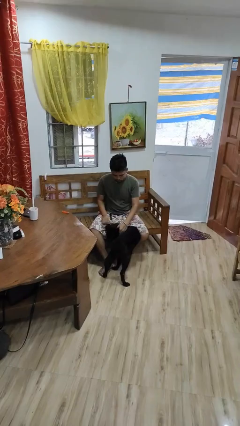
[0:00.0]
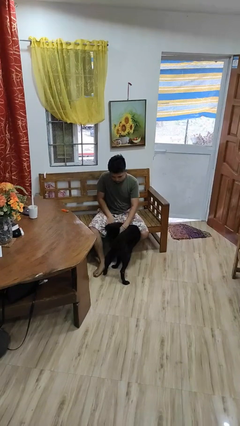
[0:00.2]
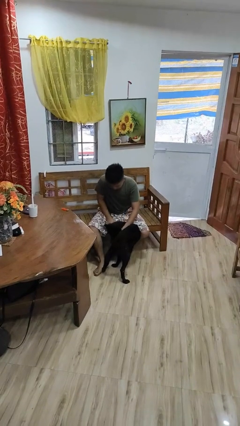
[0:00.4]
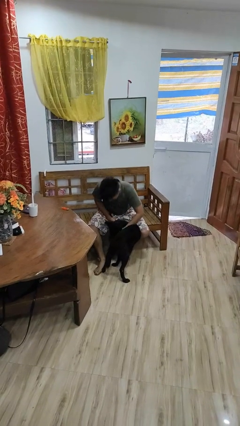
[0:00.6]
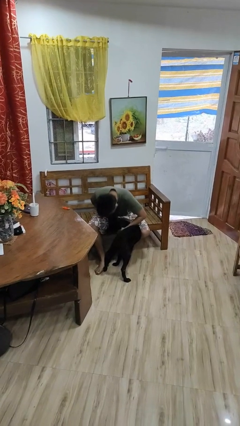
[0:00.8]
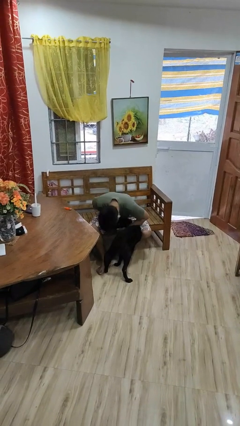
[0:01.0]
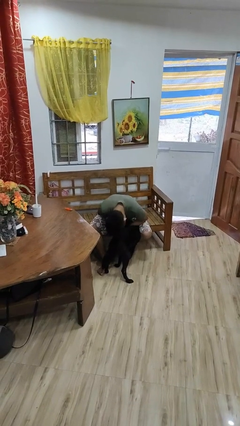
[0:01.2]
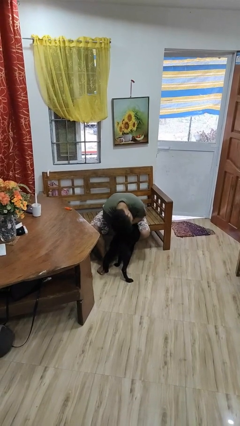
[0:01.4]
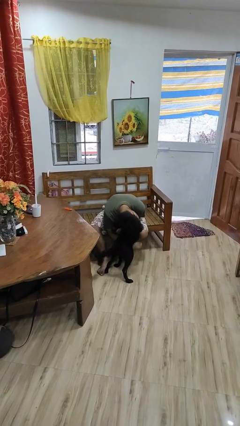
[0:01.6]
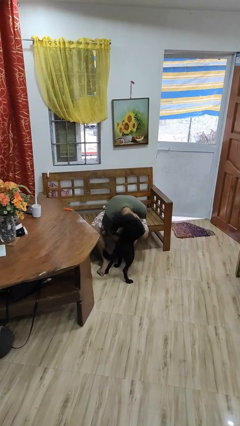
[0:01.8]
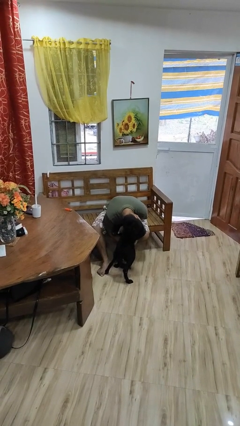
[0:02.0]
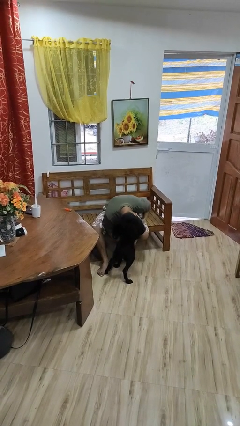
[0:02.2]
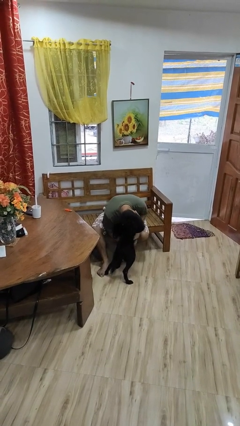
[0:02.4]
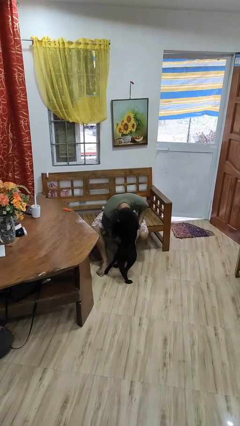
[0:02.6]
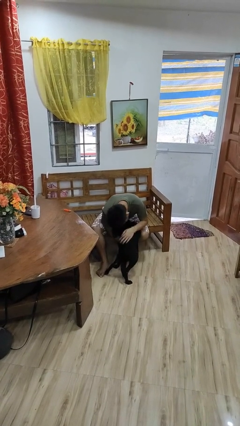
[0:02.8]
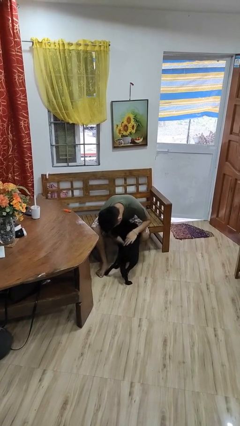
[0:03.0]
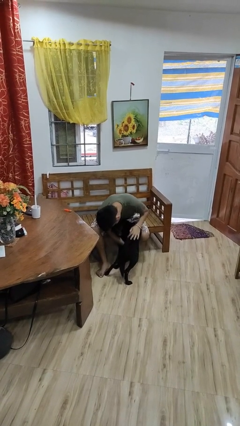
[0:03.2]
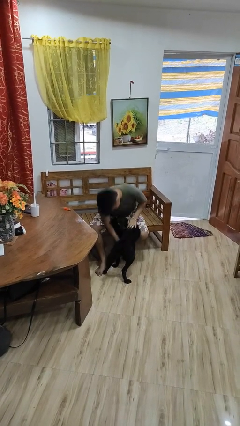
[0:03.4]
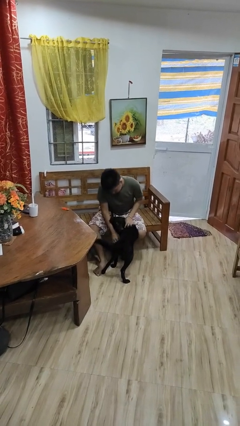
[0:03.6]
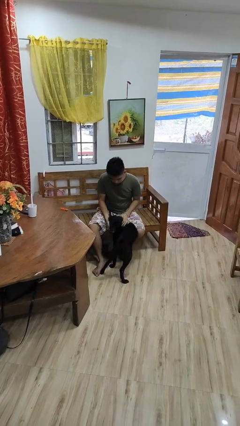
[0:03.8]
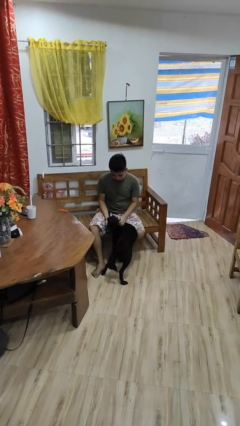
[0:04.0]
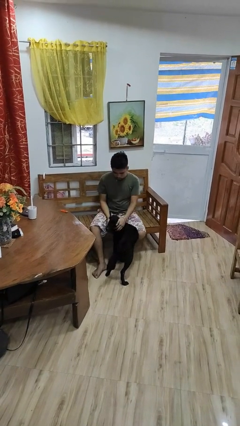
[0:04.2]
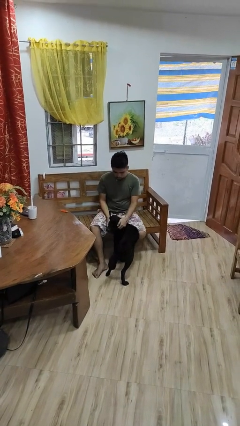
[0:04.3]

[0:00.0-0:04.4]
person hugs dog

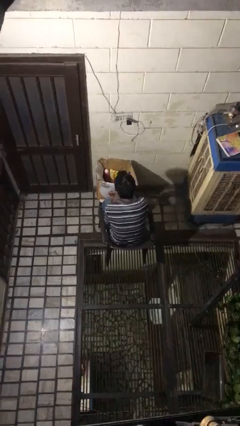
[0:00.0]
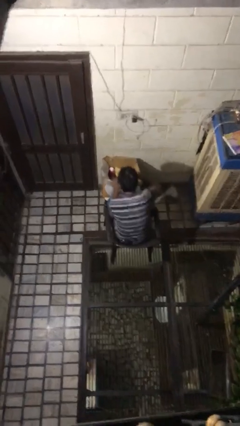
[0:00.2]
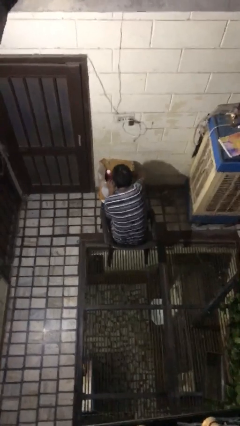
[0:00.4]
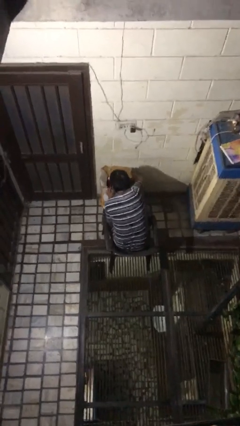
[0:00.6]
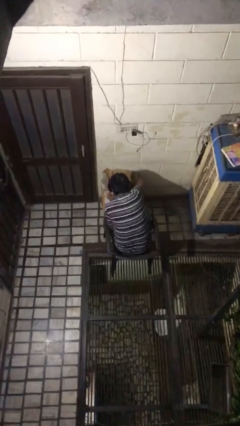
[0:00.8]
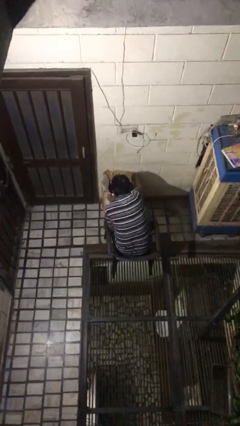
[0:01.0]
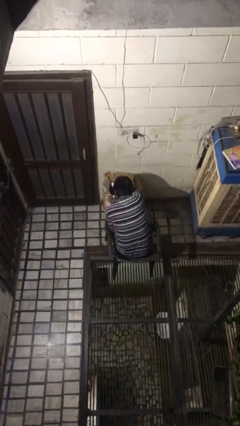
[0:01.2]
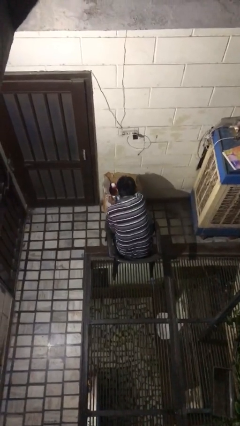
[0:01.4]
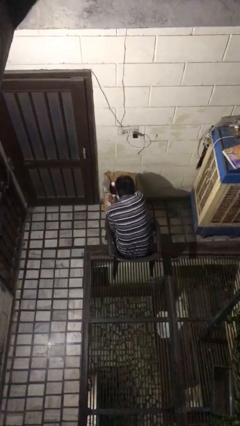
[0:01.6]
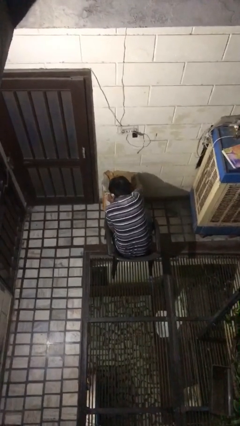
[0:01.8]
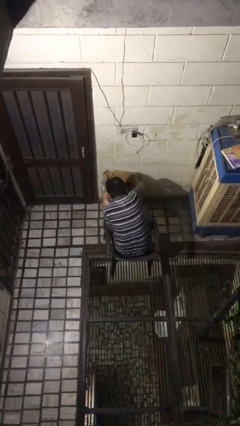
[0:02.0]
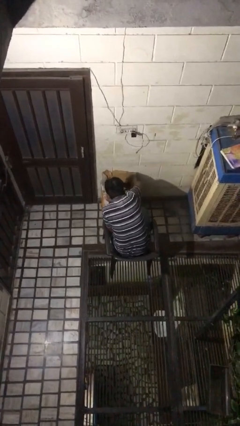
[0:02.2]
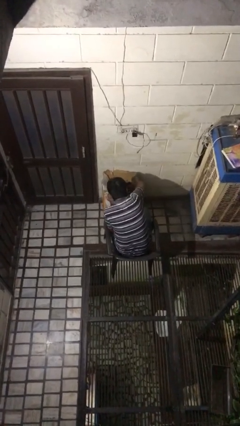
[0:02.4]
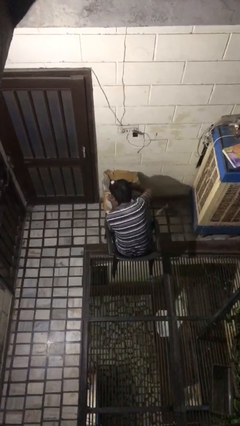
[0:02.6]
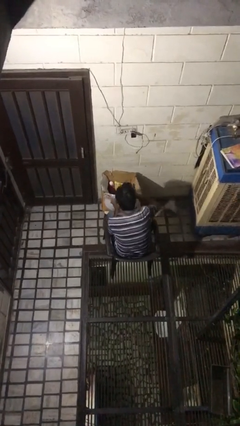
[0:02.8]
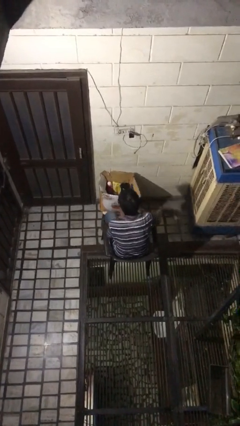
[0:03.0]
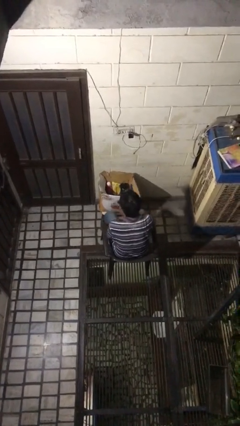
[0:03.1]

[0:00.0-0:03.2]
person searches in box

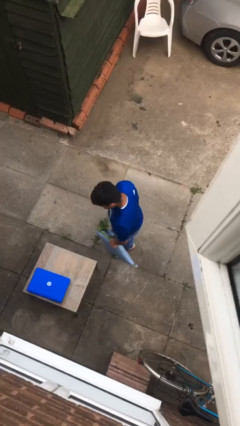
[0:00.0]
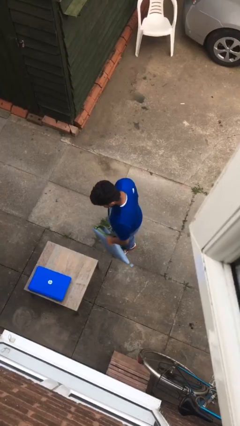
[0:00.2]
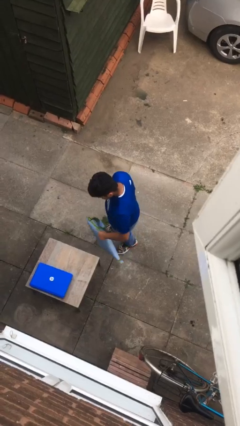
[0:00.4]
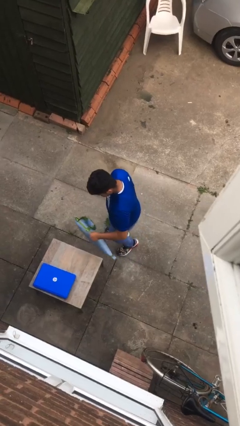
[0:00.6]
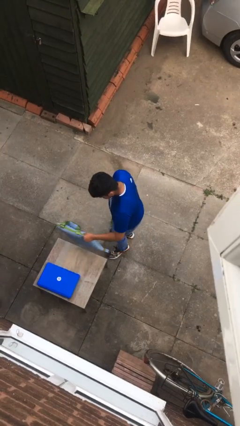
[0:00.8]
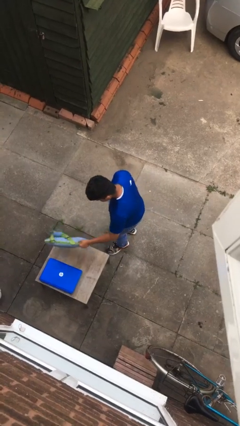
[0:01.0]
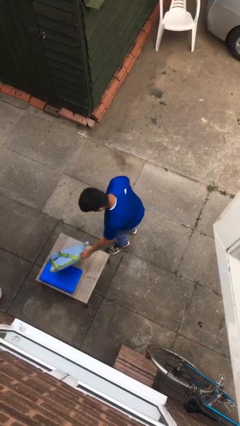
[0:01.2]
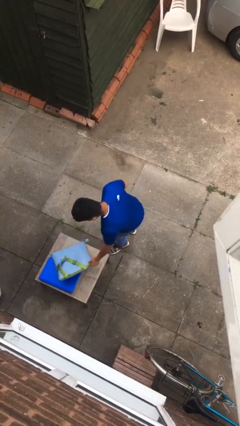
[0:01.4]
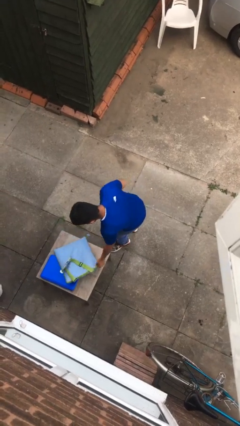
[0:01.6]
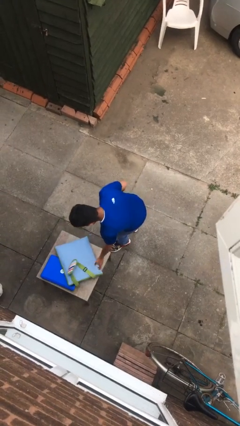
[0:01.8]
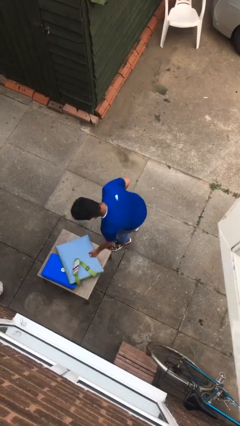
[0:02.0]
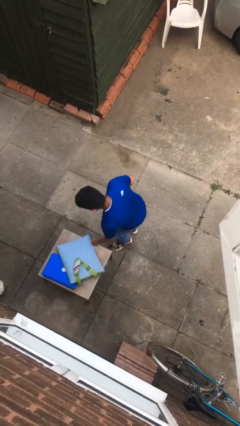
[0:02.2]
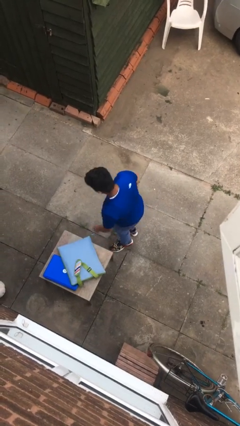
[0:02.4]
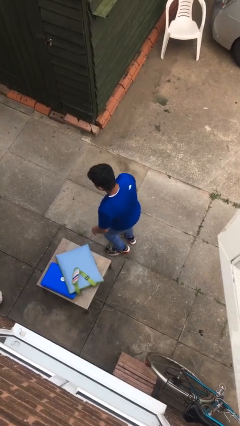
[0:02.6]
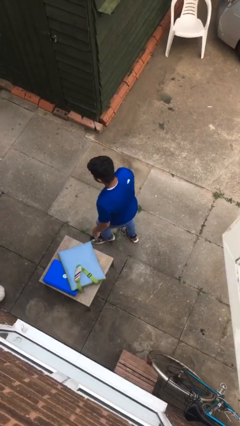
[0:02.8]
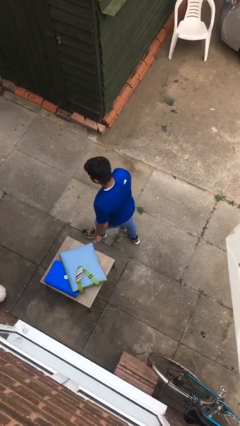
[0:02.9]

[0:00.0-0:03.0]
person puts down object on table

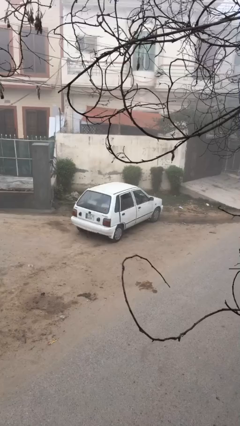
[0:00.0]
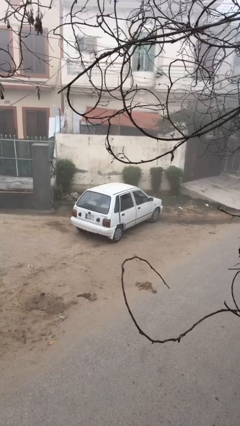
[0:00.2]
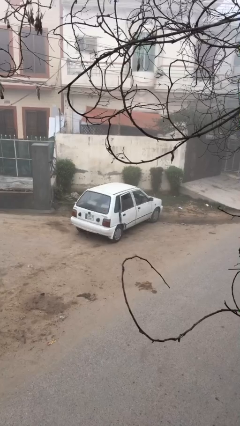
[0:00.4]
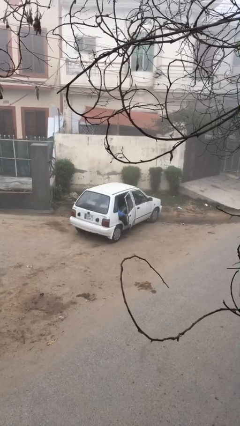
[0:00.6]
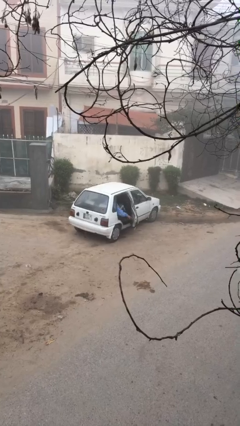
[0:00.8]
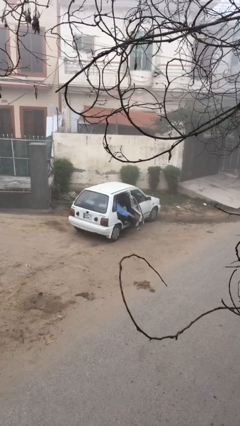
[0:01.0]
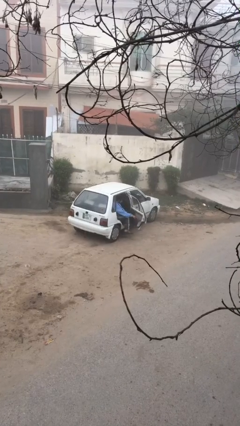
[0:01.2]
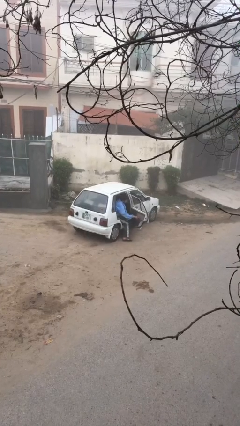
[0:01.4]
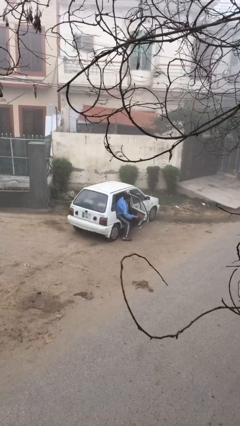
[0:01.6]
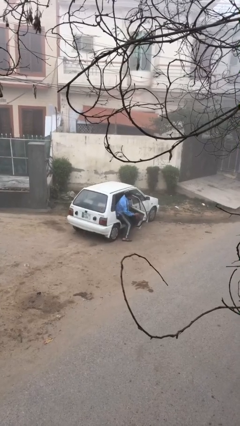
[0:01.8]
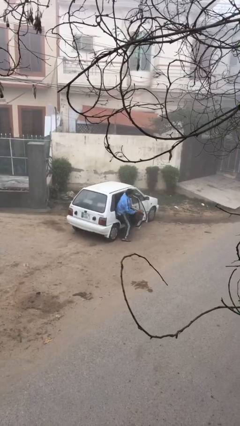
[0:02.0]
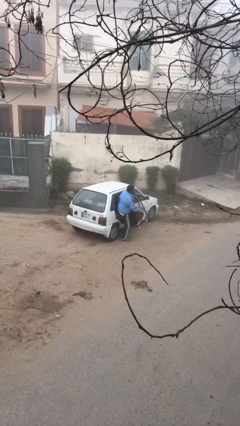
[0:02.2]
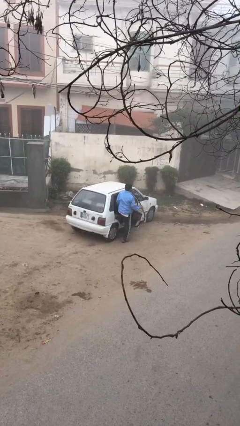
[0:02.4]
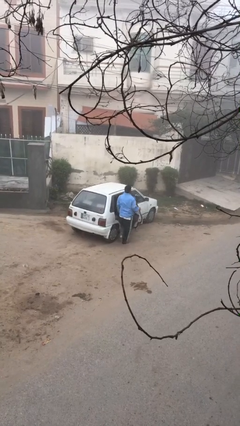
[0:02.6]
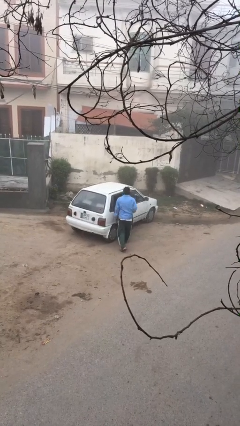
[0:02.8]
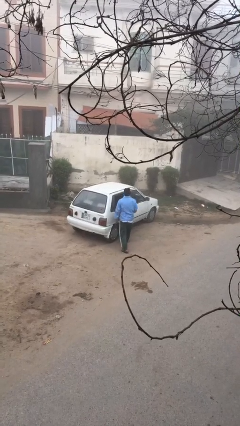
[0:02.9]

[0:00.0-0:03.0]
car drops off person

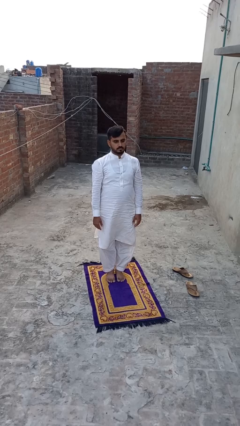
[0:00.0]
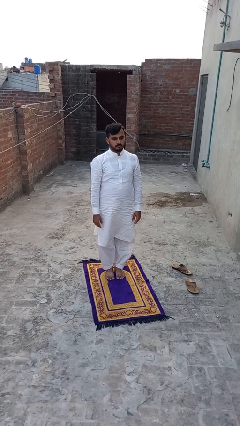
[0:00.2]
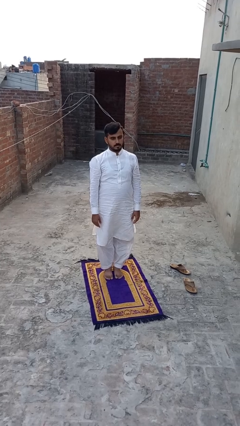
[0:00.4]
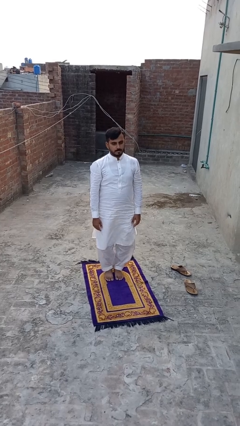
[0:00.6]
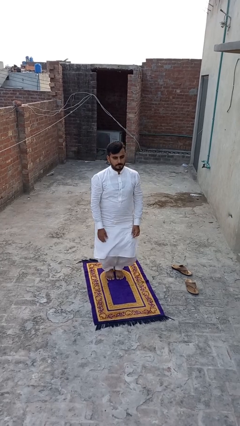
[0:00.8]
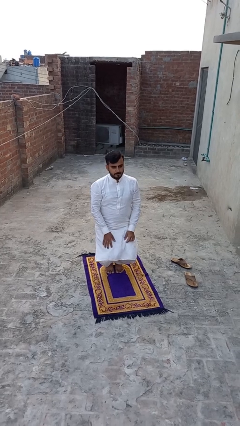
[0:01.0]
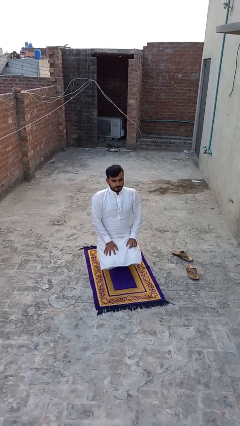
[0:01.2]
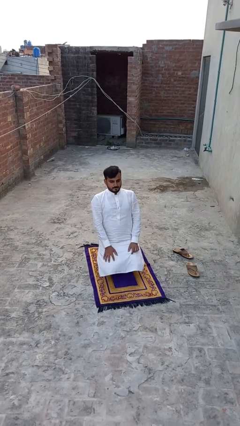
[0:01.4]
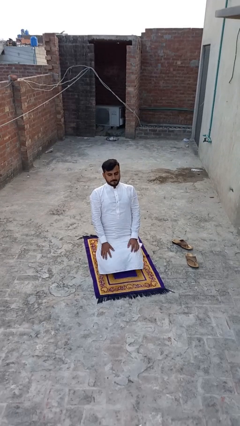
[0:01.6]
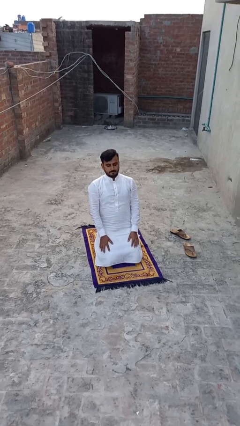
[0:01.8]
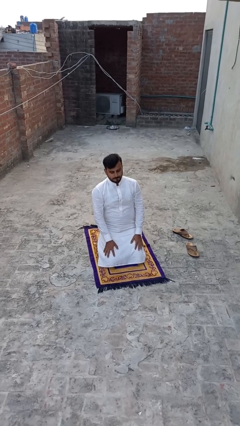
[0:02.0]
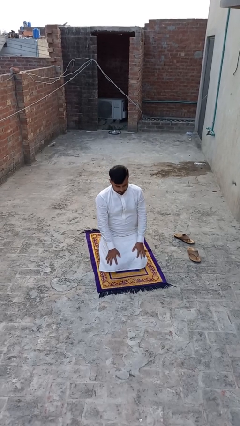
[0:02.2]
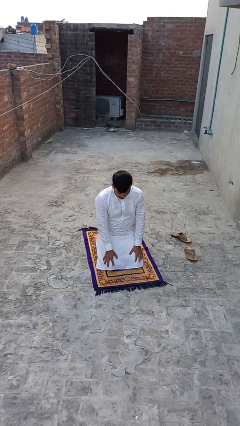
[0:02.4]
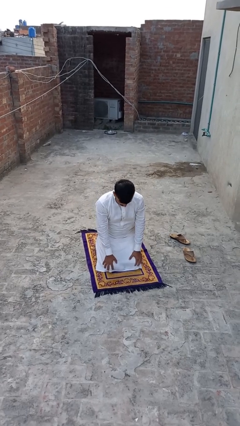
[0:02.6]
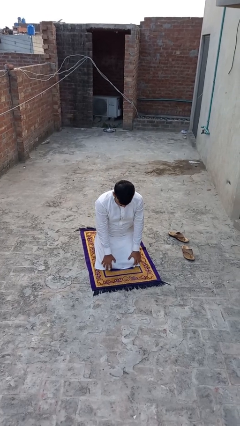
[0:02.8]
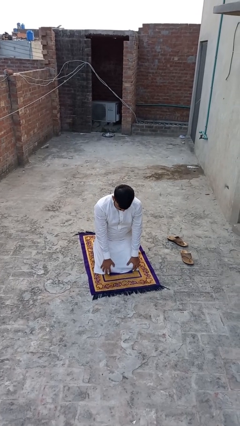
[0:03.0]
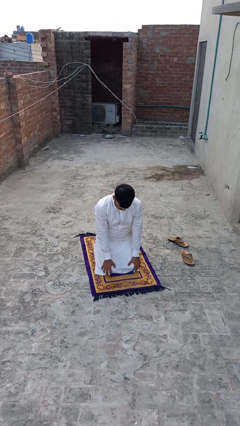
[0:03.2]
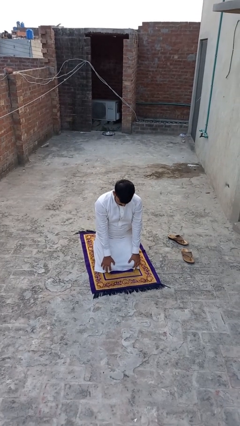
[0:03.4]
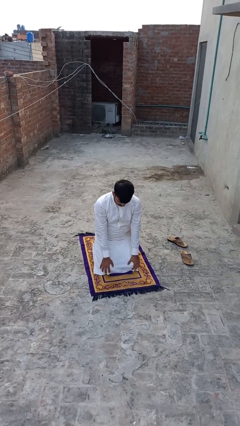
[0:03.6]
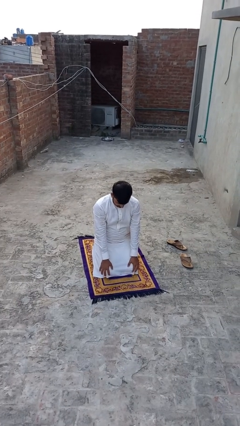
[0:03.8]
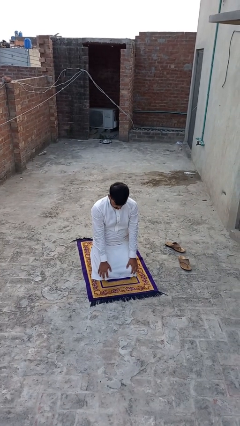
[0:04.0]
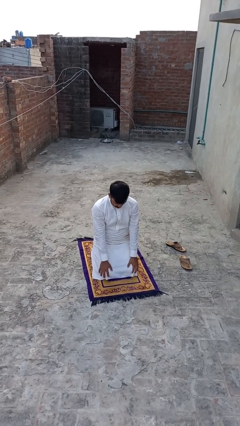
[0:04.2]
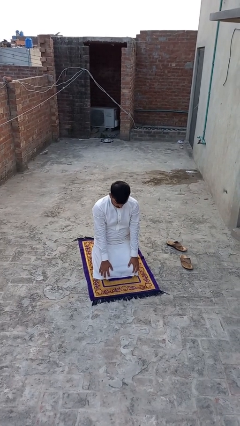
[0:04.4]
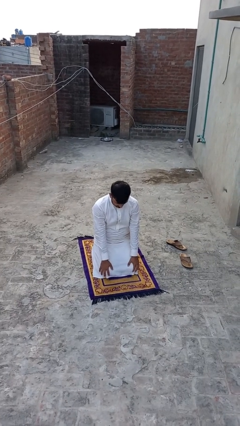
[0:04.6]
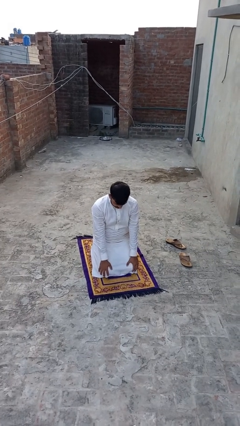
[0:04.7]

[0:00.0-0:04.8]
person kneels
